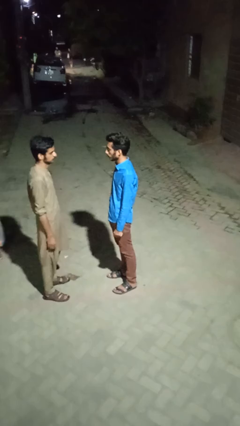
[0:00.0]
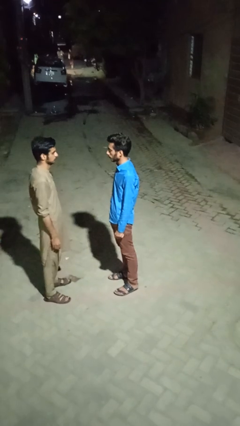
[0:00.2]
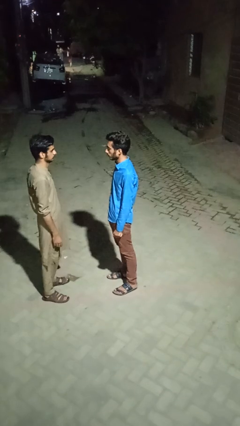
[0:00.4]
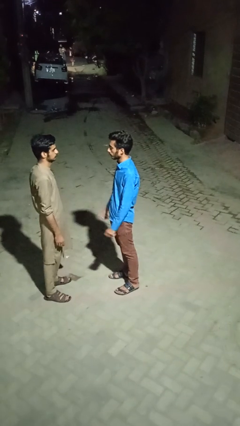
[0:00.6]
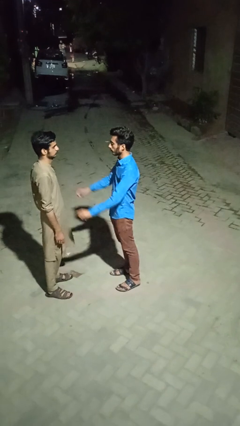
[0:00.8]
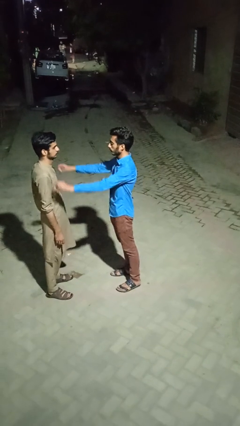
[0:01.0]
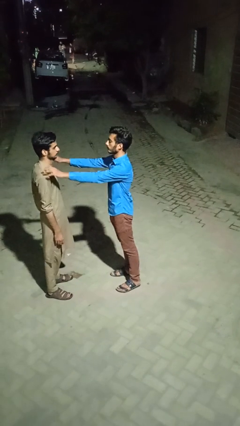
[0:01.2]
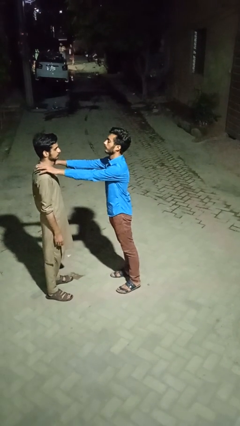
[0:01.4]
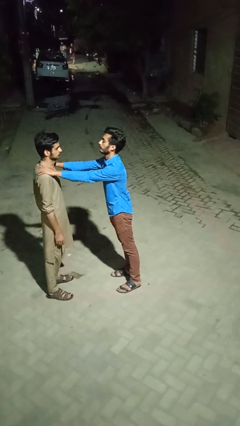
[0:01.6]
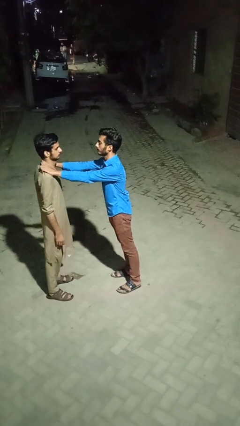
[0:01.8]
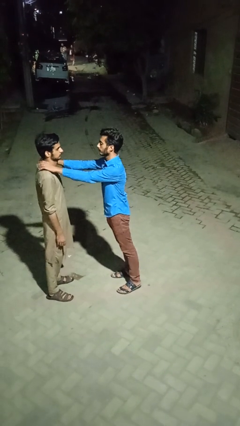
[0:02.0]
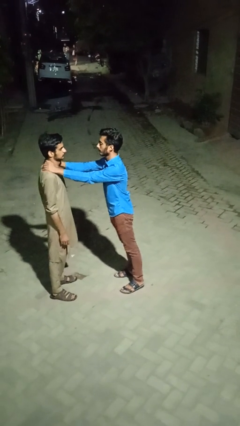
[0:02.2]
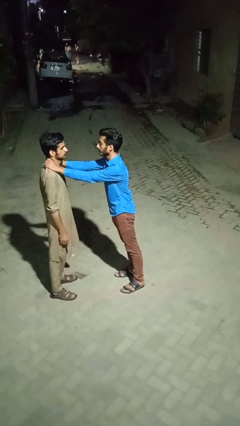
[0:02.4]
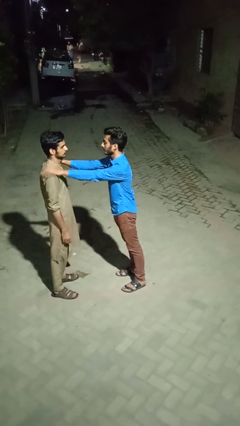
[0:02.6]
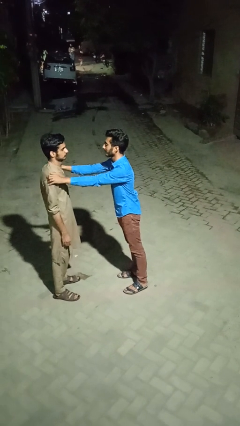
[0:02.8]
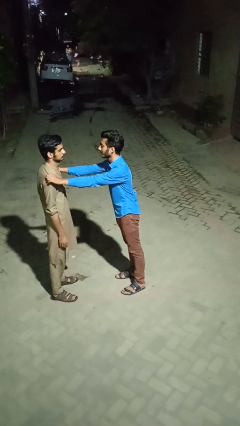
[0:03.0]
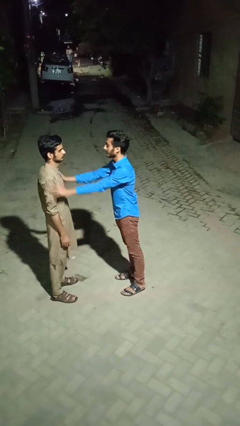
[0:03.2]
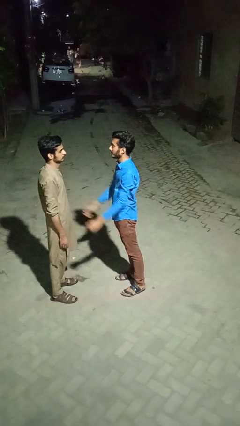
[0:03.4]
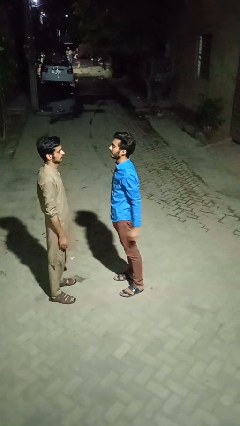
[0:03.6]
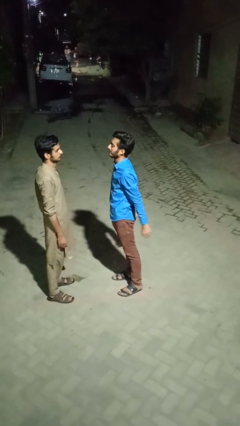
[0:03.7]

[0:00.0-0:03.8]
person pounds shoulders of person

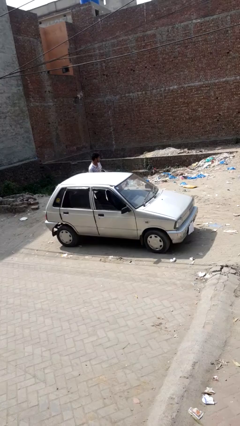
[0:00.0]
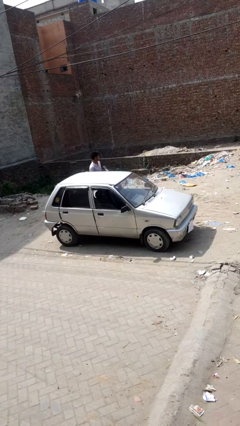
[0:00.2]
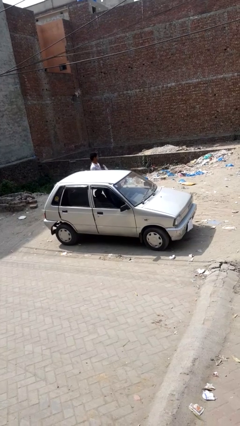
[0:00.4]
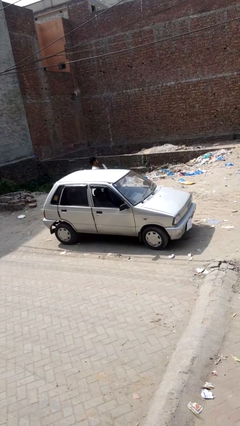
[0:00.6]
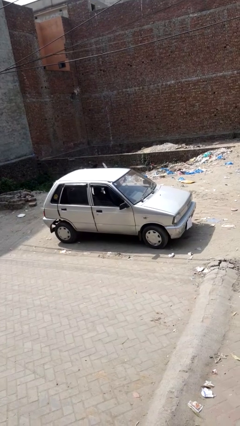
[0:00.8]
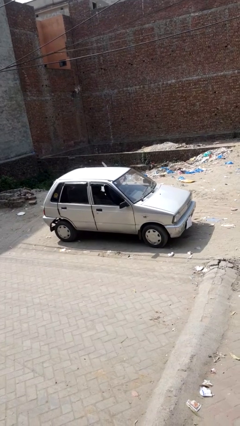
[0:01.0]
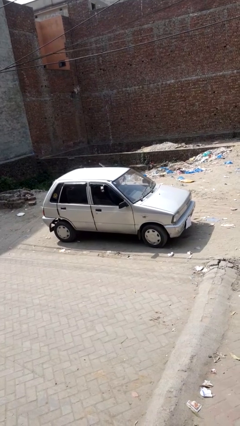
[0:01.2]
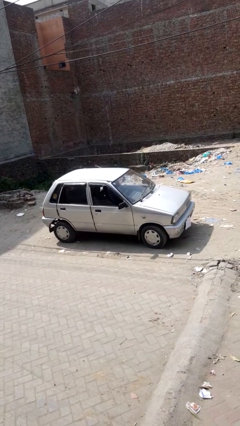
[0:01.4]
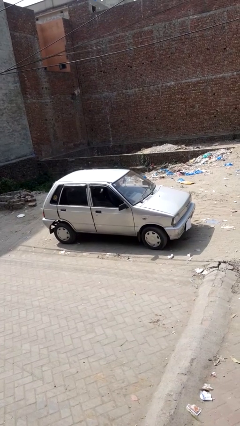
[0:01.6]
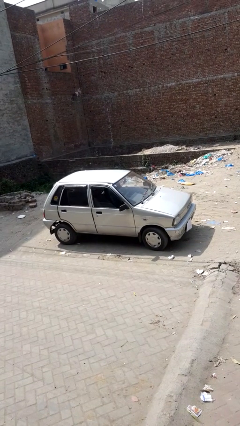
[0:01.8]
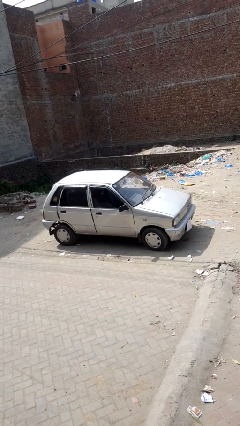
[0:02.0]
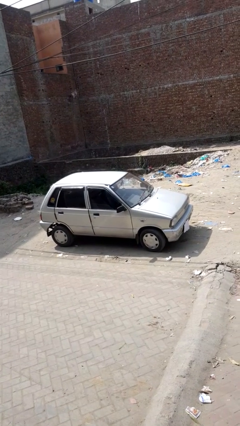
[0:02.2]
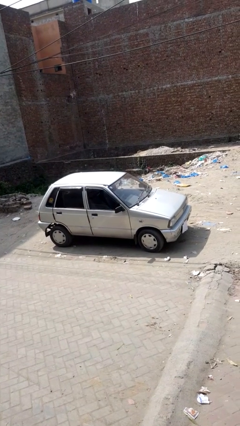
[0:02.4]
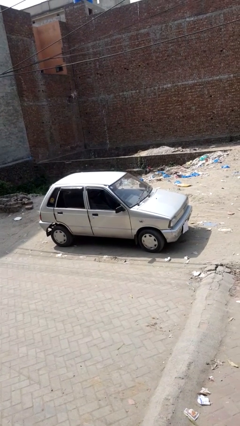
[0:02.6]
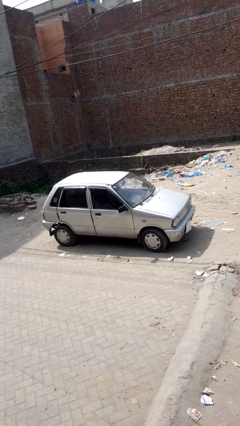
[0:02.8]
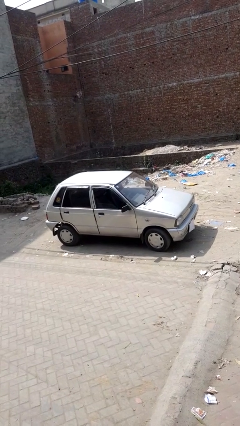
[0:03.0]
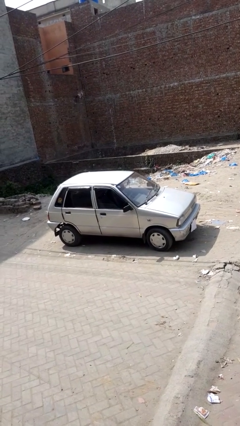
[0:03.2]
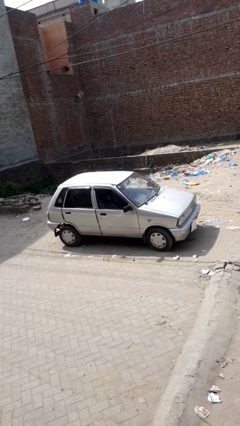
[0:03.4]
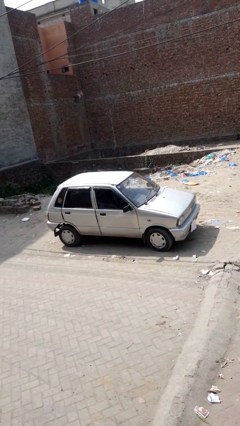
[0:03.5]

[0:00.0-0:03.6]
car picks up person

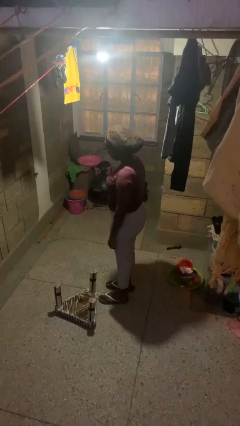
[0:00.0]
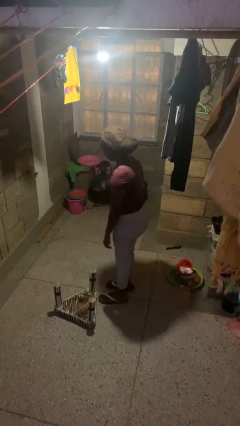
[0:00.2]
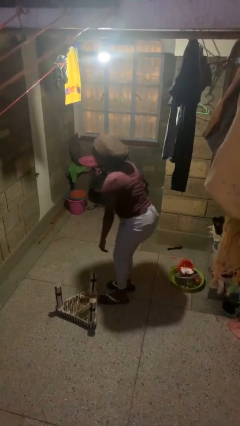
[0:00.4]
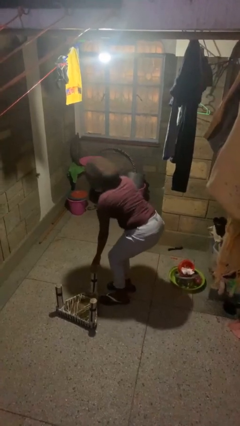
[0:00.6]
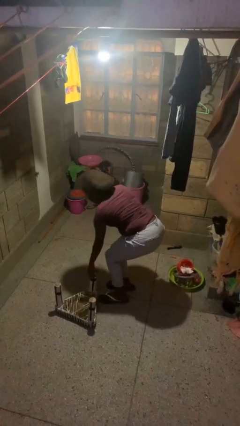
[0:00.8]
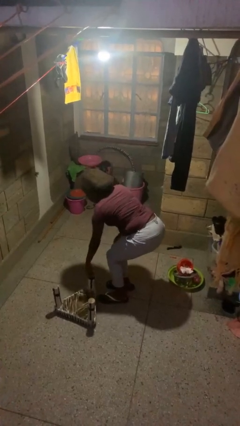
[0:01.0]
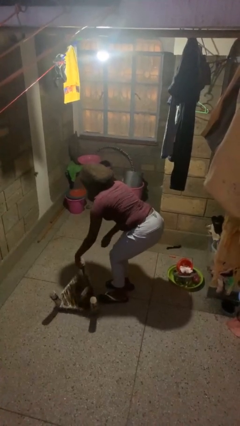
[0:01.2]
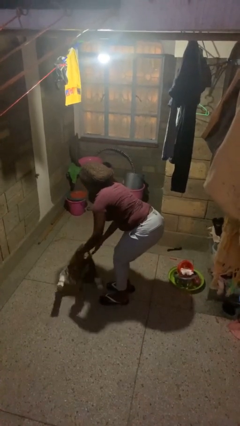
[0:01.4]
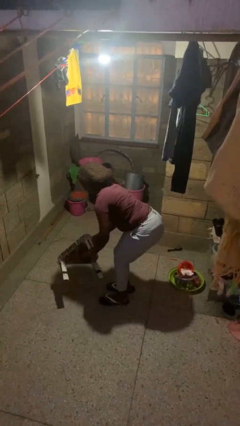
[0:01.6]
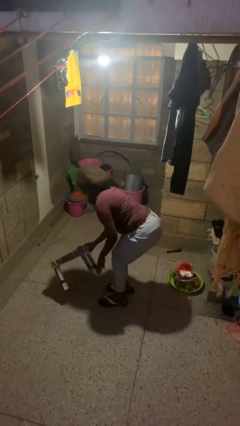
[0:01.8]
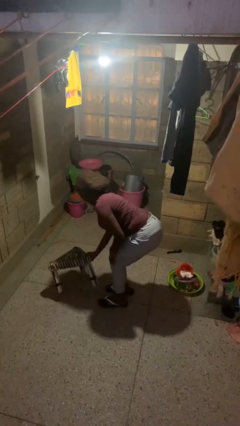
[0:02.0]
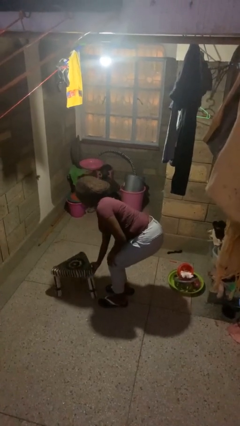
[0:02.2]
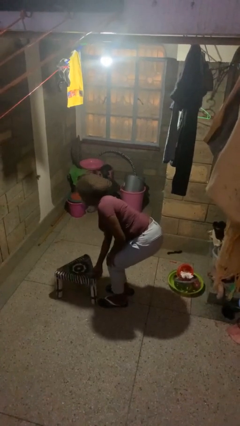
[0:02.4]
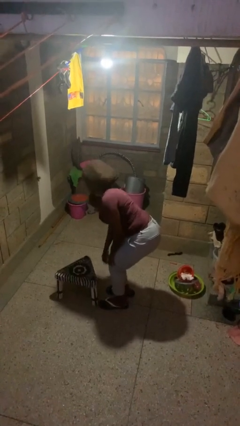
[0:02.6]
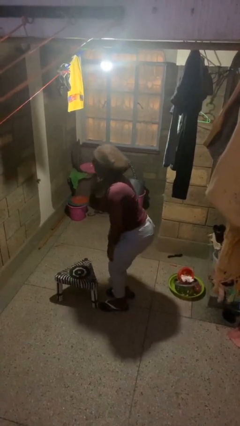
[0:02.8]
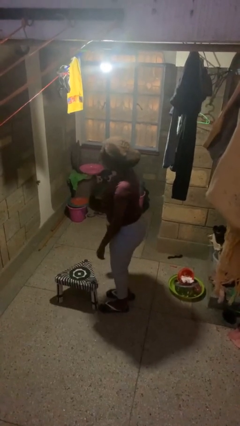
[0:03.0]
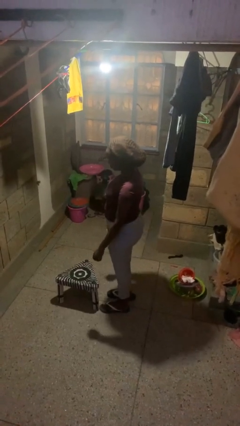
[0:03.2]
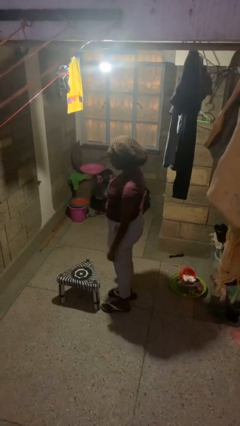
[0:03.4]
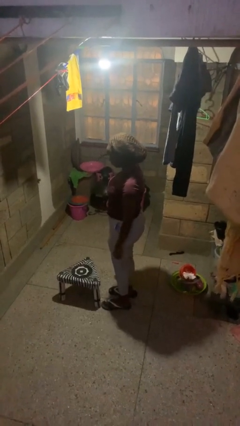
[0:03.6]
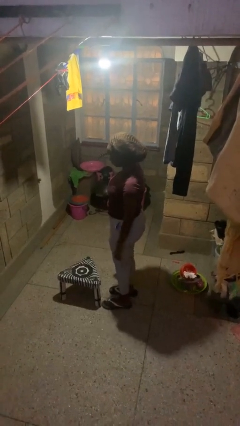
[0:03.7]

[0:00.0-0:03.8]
person sets upright furniture

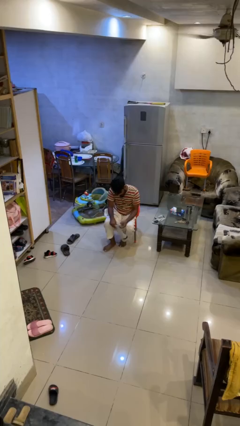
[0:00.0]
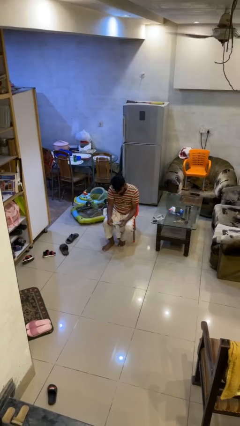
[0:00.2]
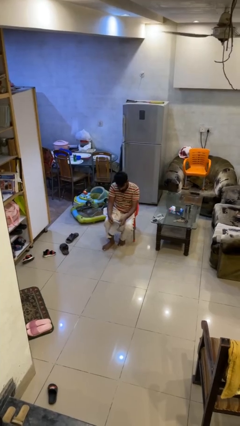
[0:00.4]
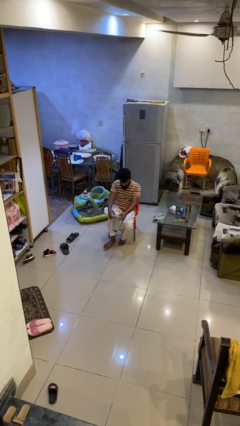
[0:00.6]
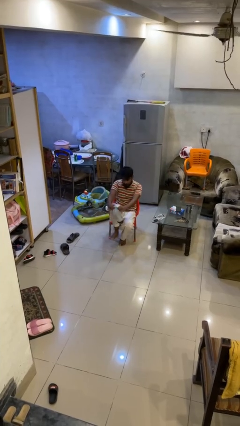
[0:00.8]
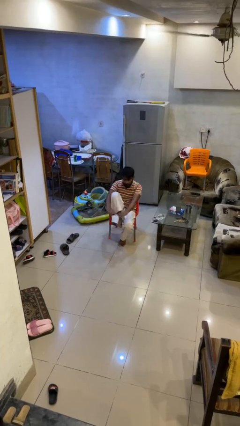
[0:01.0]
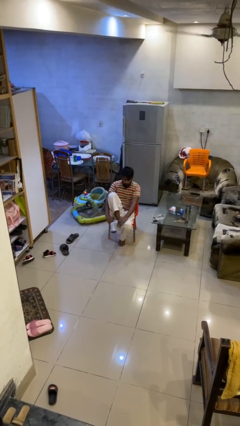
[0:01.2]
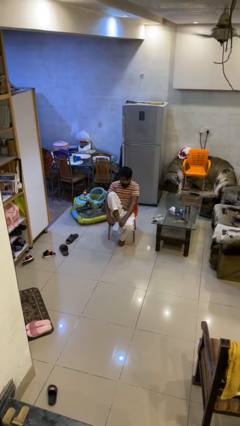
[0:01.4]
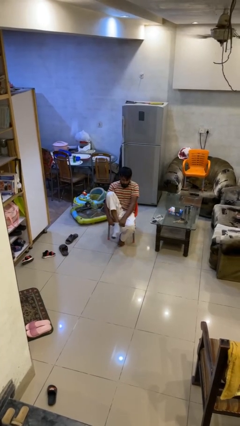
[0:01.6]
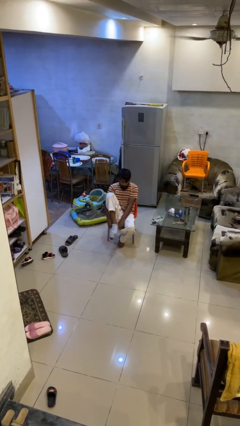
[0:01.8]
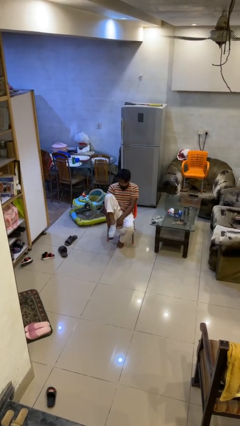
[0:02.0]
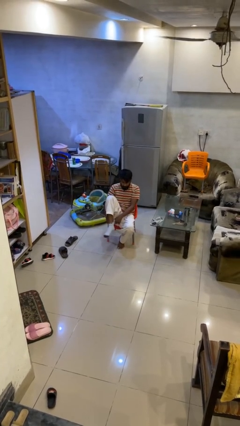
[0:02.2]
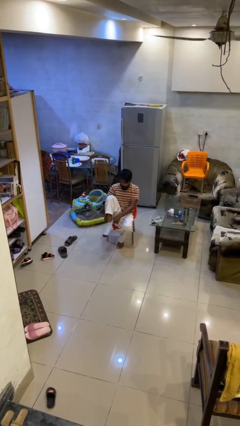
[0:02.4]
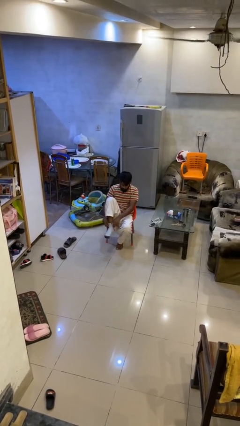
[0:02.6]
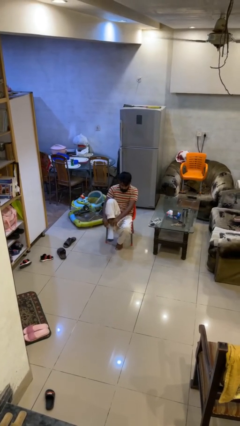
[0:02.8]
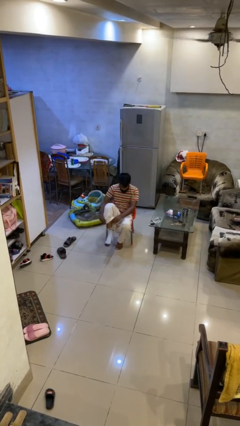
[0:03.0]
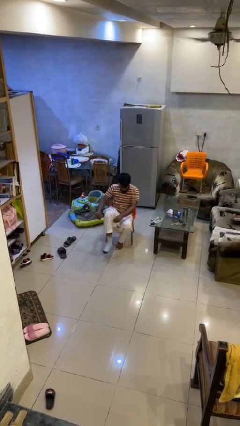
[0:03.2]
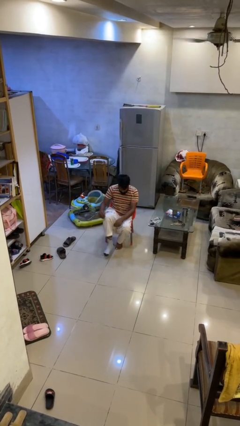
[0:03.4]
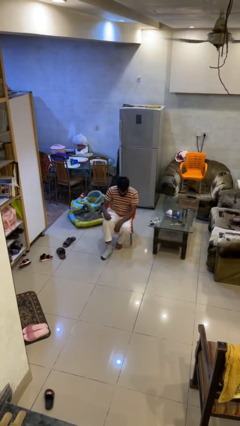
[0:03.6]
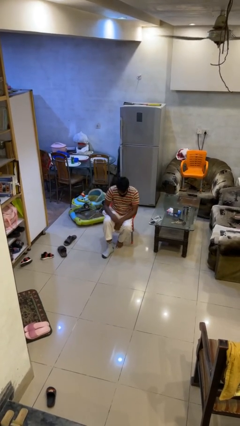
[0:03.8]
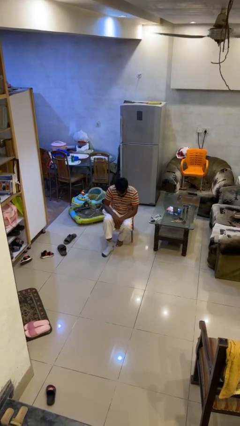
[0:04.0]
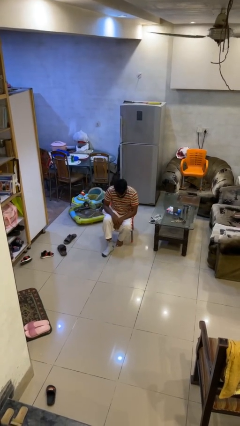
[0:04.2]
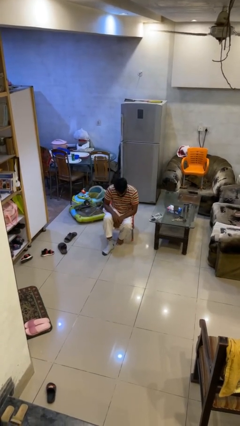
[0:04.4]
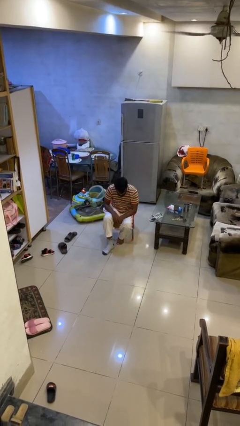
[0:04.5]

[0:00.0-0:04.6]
person puts on socks

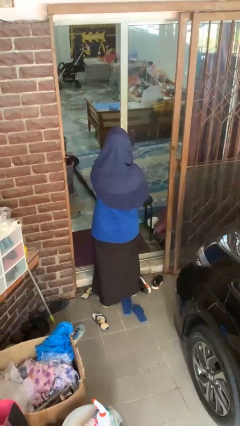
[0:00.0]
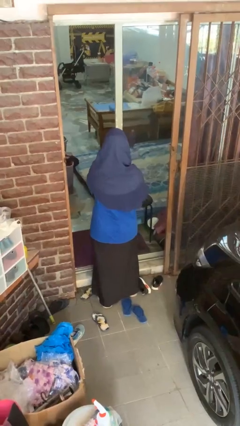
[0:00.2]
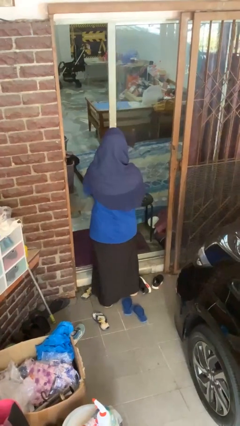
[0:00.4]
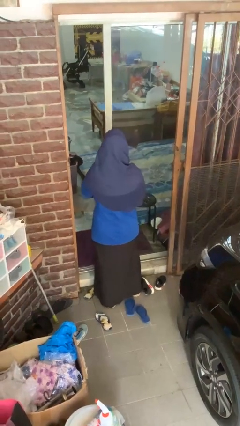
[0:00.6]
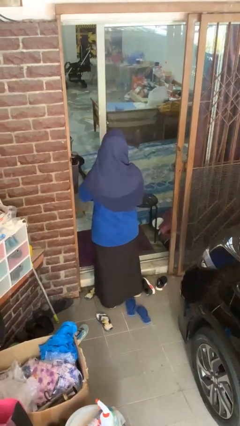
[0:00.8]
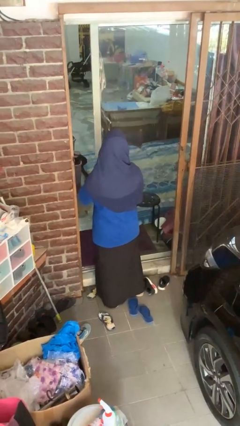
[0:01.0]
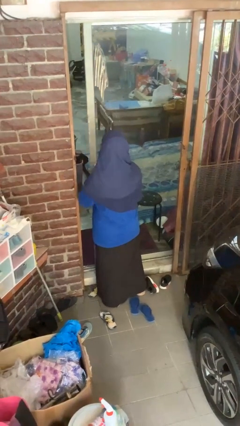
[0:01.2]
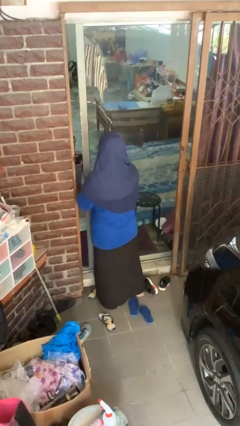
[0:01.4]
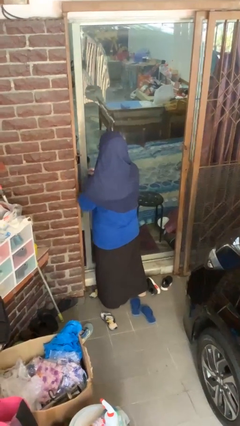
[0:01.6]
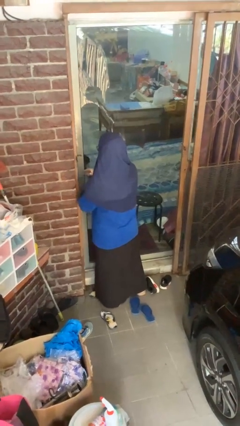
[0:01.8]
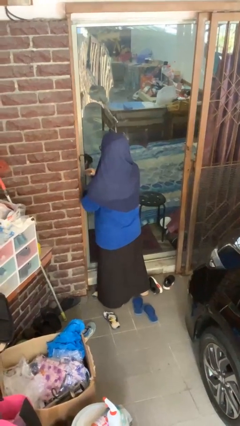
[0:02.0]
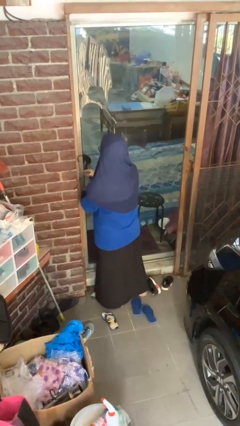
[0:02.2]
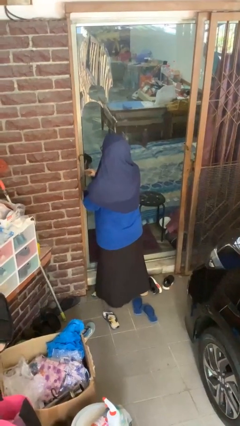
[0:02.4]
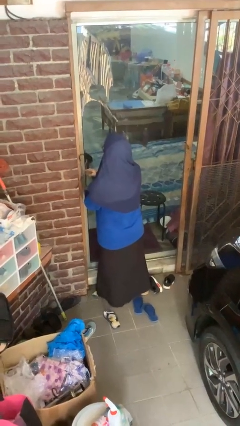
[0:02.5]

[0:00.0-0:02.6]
person closes sliding door
